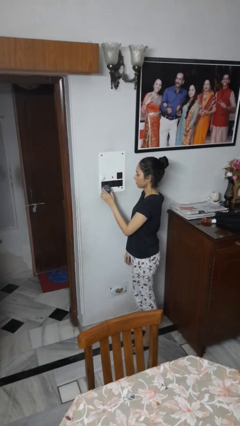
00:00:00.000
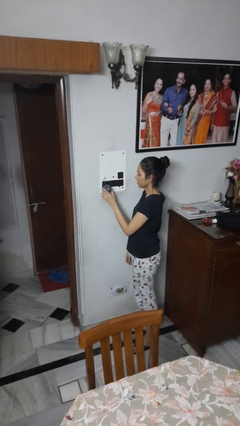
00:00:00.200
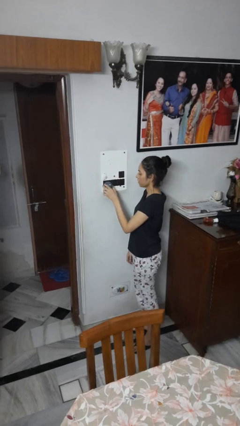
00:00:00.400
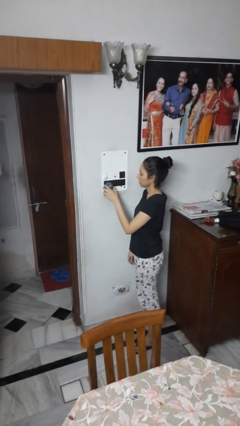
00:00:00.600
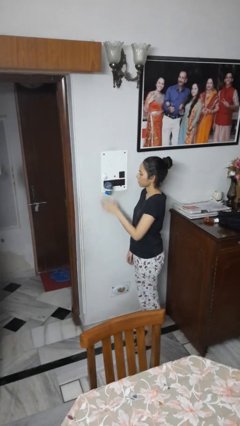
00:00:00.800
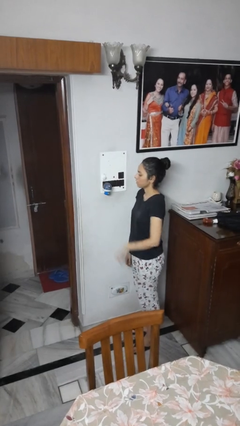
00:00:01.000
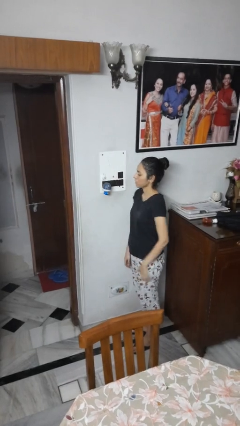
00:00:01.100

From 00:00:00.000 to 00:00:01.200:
person plugs into electrical socket

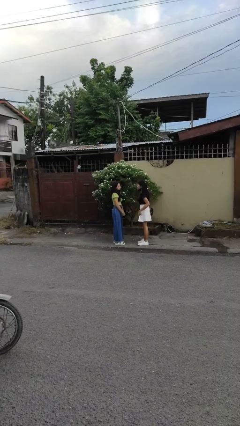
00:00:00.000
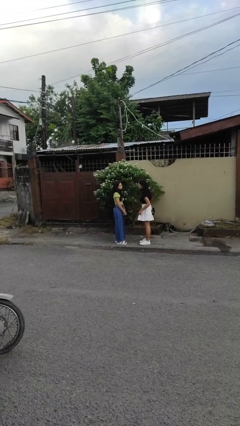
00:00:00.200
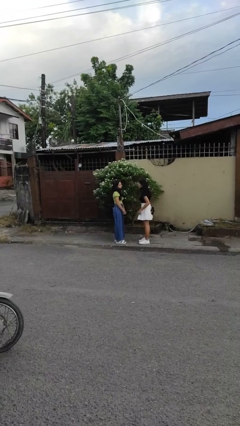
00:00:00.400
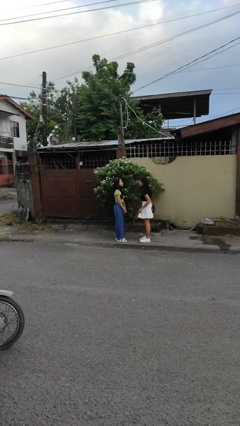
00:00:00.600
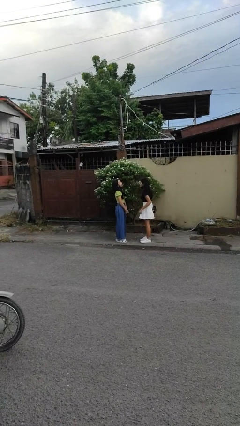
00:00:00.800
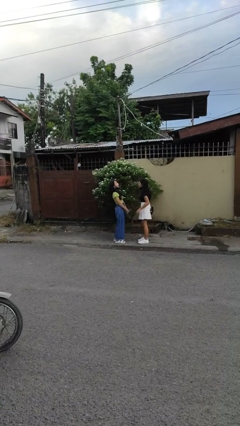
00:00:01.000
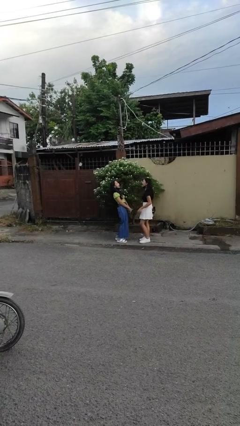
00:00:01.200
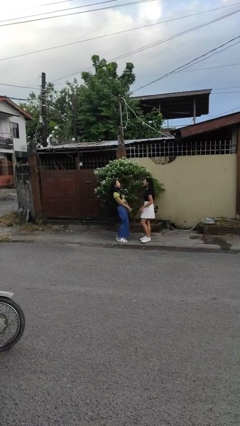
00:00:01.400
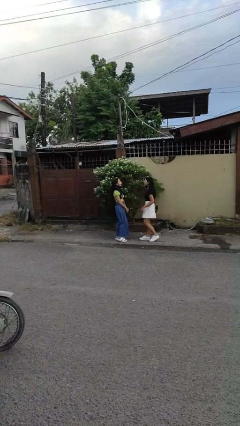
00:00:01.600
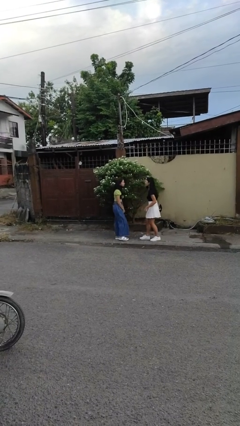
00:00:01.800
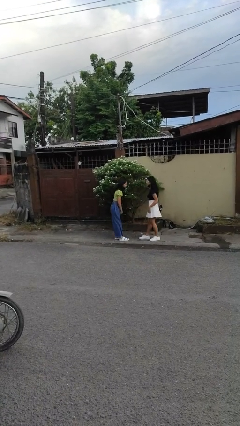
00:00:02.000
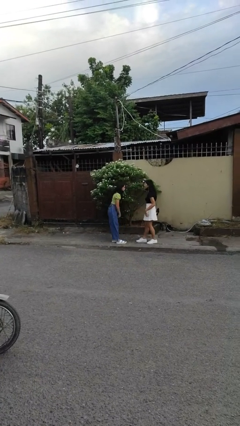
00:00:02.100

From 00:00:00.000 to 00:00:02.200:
person laughs with person

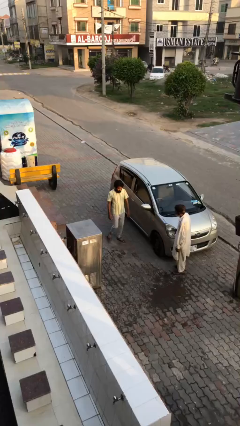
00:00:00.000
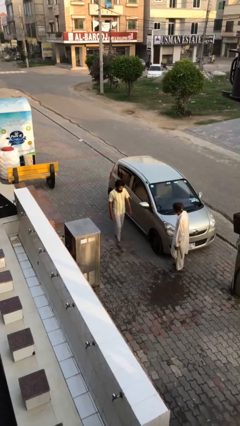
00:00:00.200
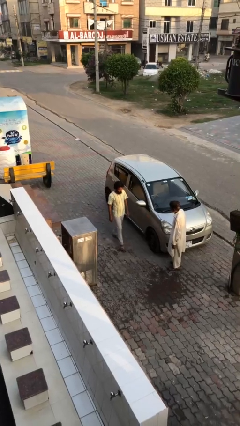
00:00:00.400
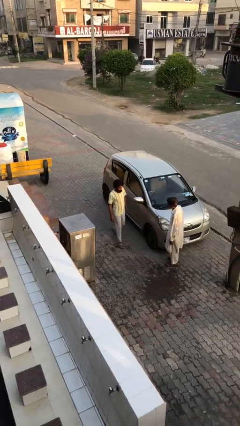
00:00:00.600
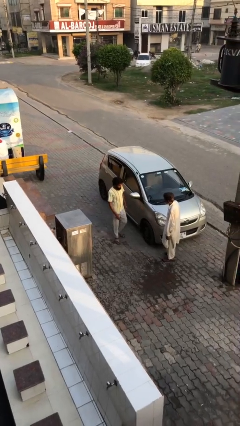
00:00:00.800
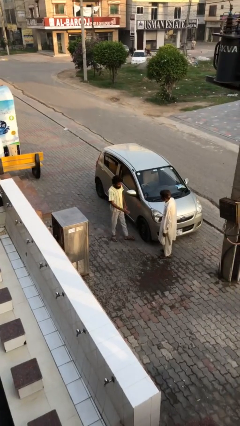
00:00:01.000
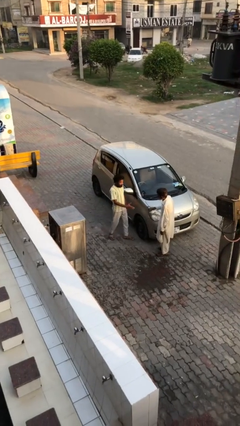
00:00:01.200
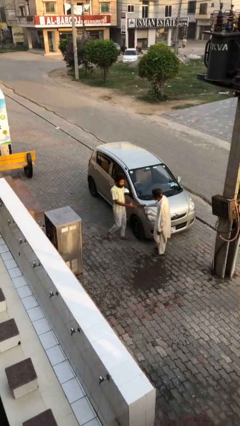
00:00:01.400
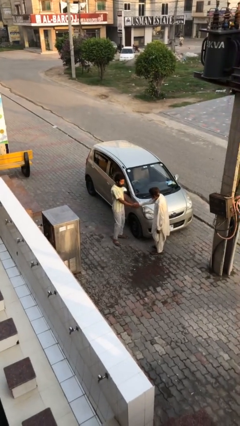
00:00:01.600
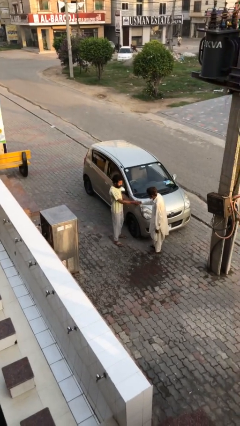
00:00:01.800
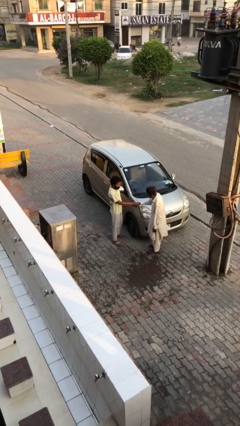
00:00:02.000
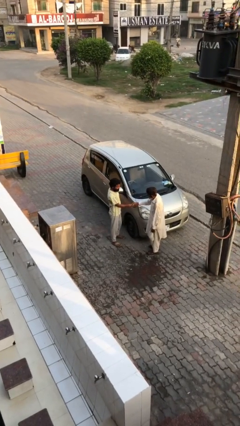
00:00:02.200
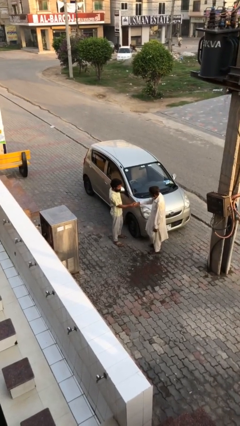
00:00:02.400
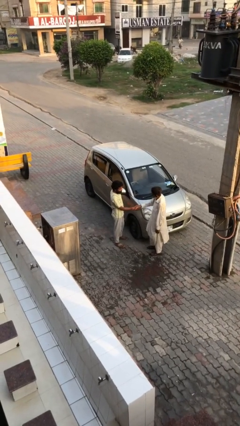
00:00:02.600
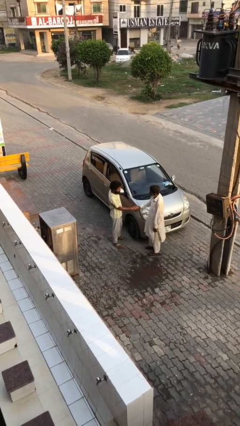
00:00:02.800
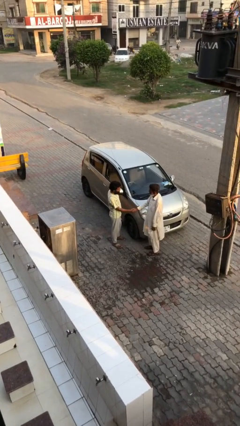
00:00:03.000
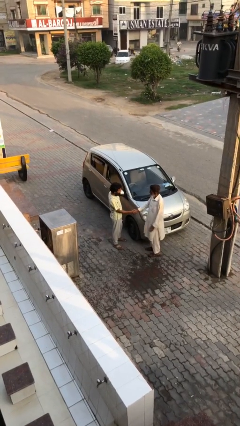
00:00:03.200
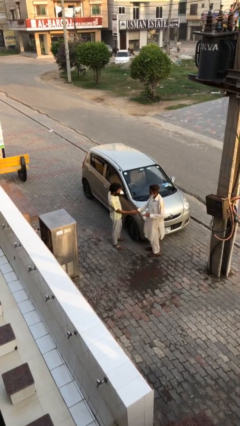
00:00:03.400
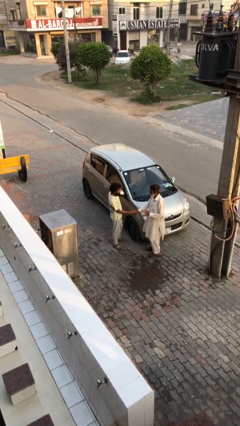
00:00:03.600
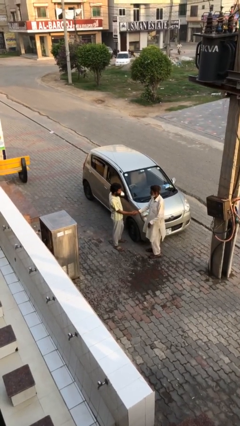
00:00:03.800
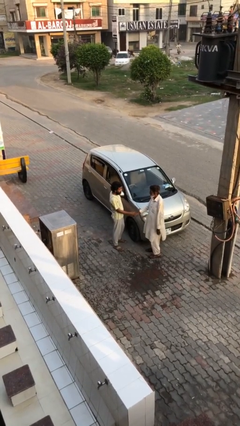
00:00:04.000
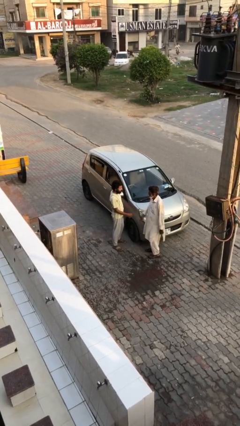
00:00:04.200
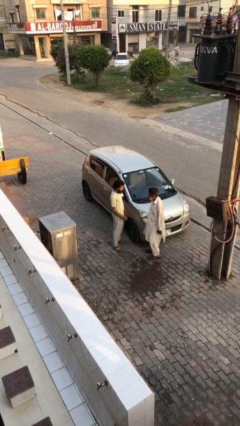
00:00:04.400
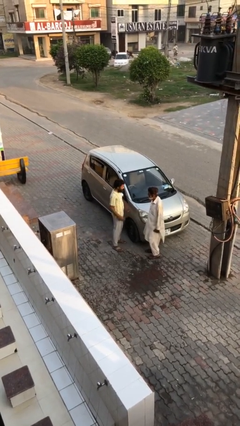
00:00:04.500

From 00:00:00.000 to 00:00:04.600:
person shakes hand

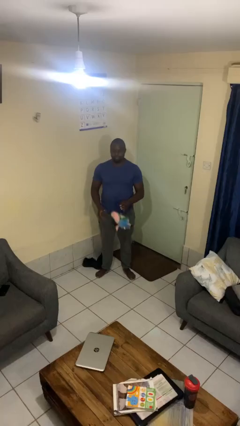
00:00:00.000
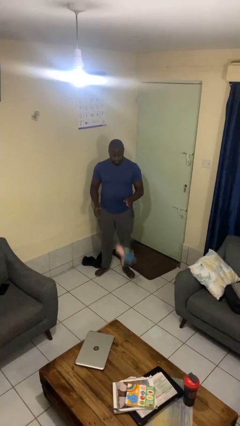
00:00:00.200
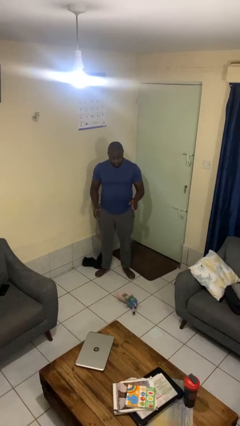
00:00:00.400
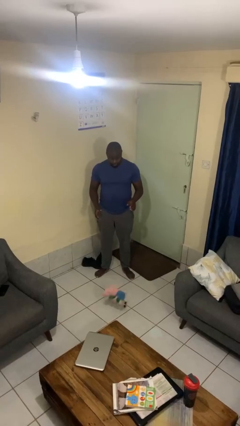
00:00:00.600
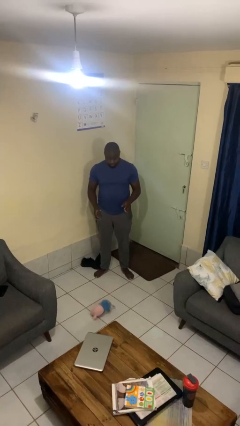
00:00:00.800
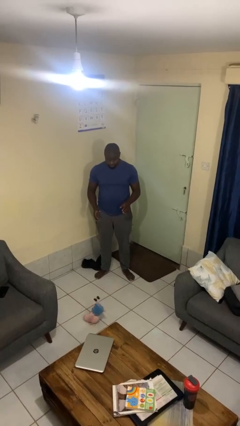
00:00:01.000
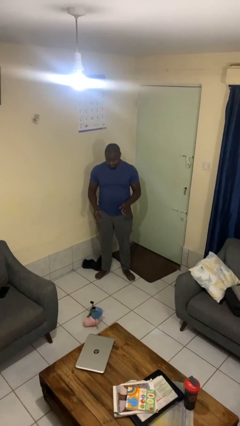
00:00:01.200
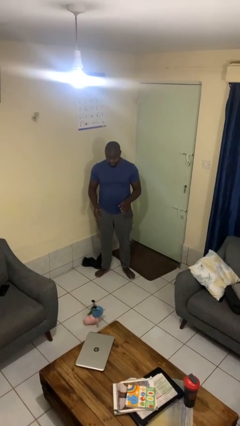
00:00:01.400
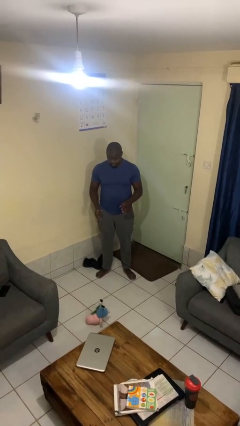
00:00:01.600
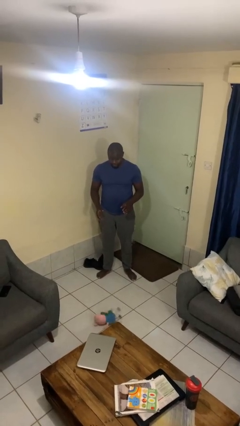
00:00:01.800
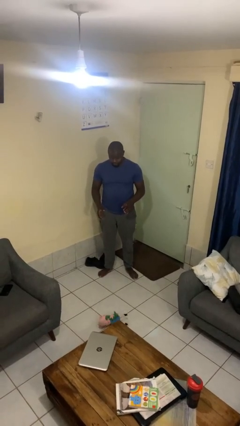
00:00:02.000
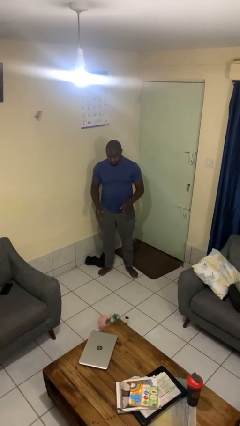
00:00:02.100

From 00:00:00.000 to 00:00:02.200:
person drops object

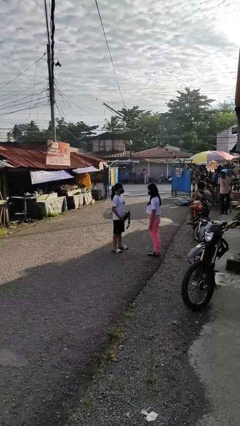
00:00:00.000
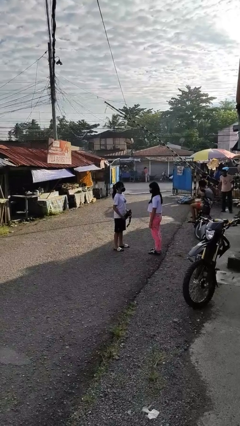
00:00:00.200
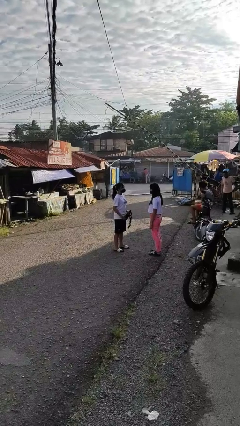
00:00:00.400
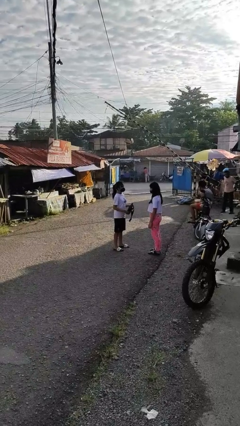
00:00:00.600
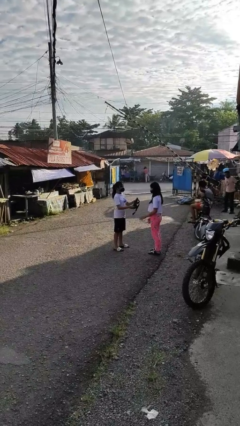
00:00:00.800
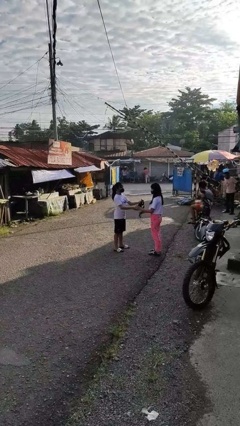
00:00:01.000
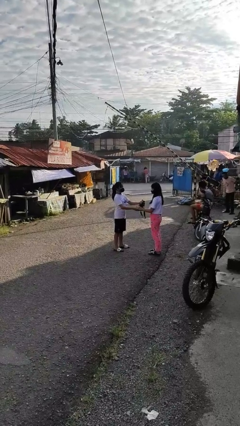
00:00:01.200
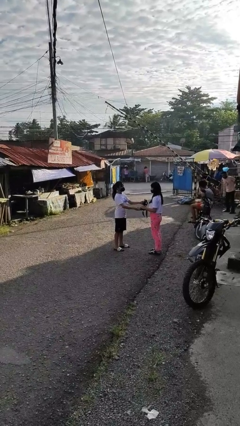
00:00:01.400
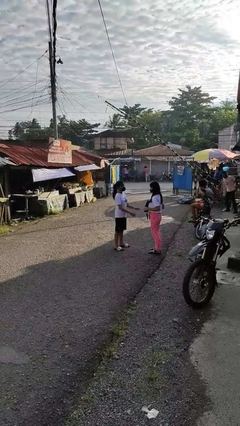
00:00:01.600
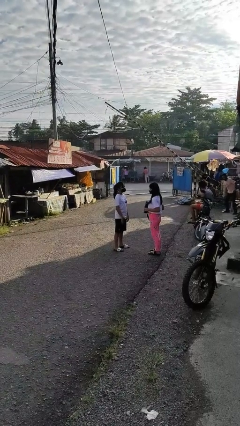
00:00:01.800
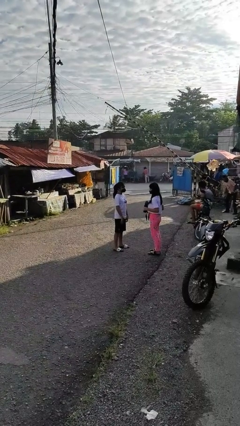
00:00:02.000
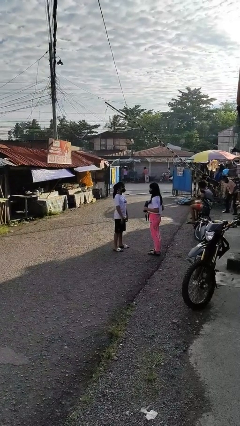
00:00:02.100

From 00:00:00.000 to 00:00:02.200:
person transfers object to person

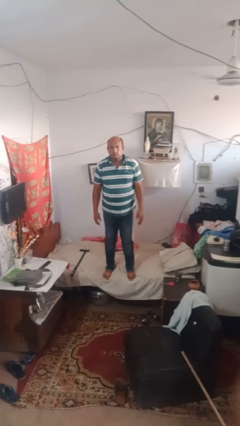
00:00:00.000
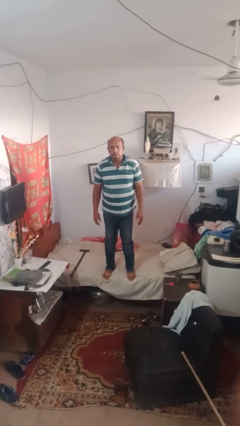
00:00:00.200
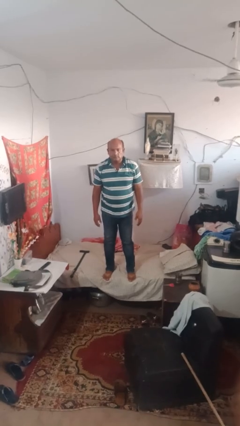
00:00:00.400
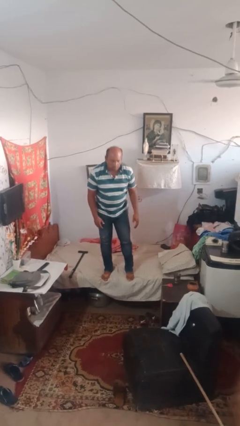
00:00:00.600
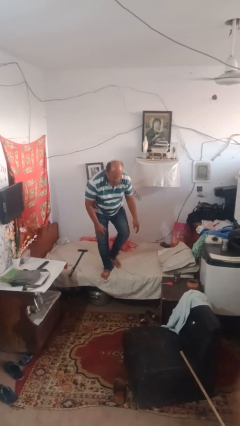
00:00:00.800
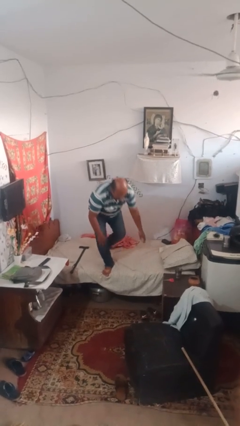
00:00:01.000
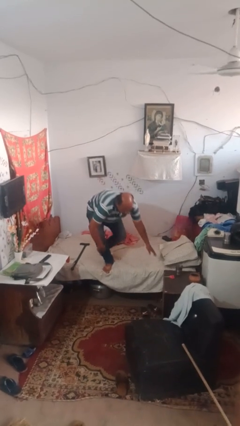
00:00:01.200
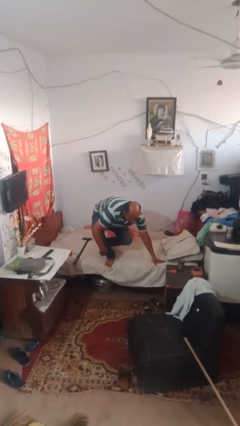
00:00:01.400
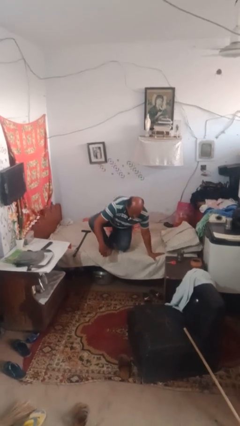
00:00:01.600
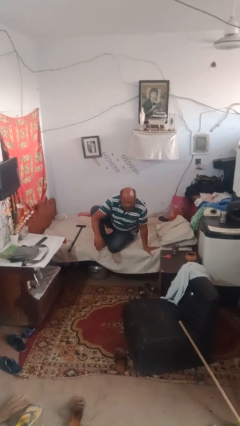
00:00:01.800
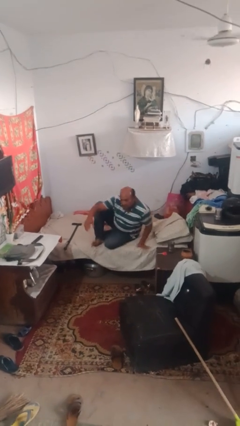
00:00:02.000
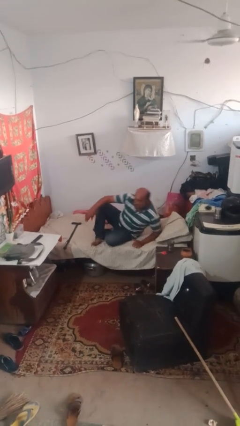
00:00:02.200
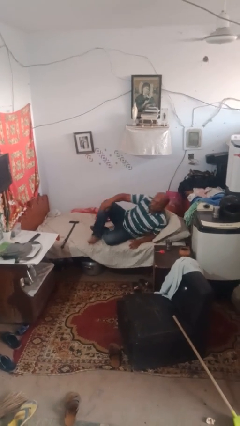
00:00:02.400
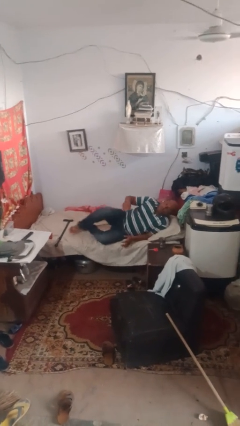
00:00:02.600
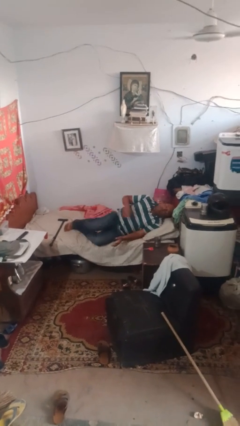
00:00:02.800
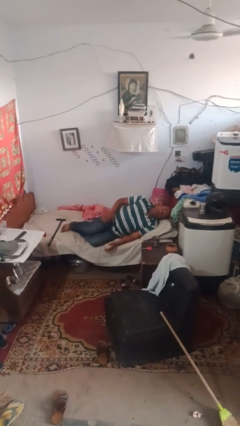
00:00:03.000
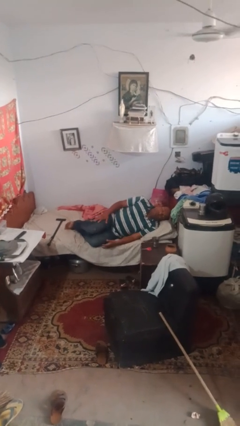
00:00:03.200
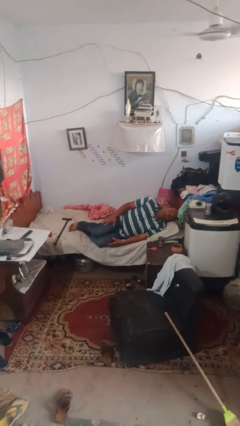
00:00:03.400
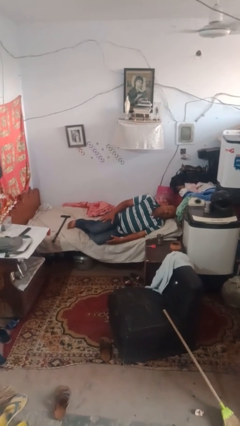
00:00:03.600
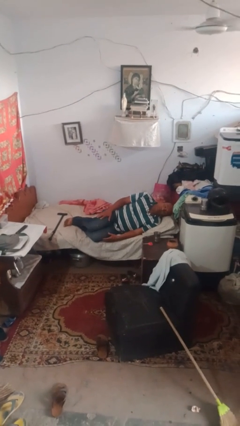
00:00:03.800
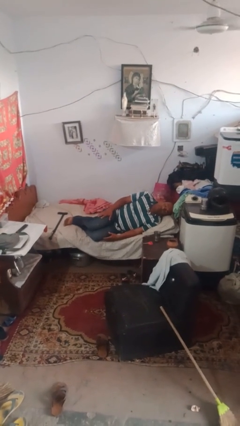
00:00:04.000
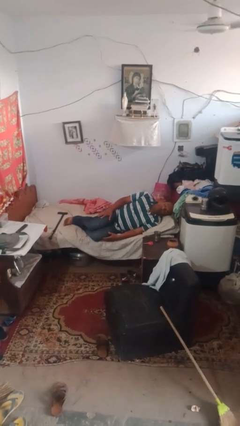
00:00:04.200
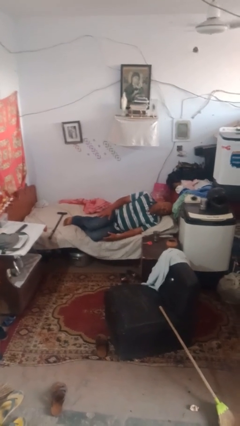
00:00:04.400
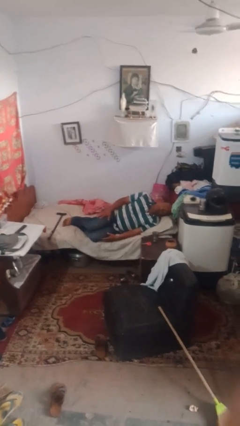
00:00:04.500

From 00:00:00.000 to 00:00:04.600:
person lies down on bed
